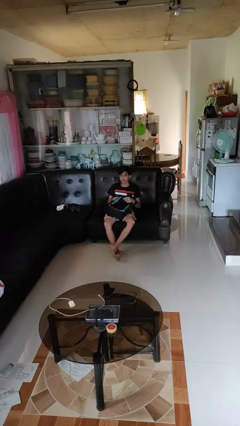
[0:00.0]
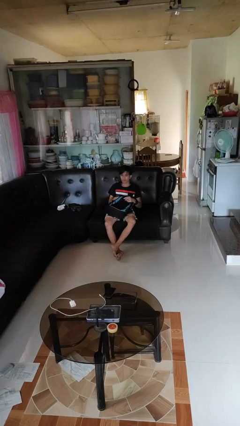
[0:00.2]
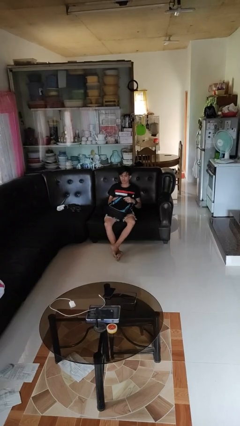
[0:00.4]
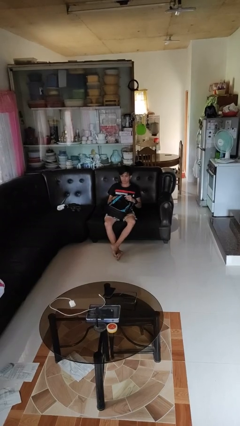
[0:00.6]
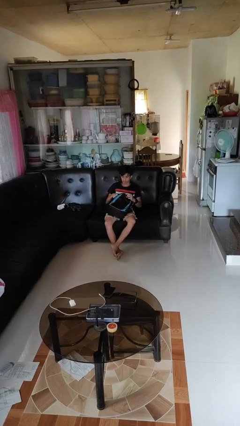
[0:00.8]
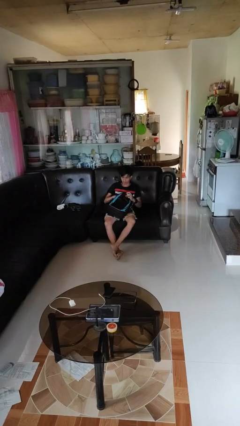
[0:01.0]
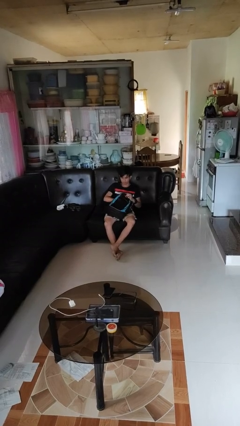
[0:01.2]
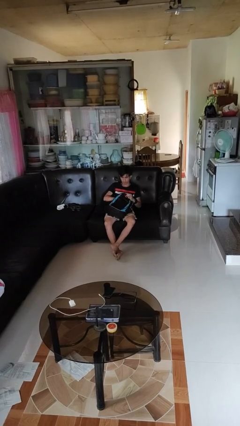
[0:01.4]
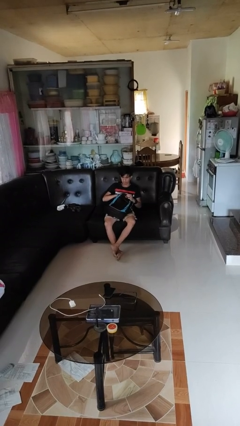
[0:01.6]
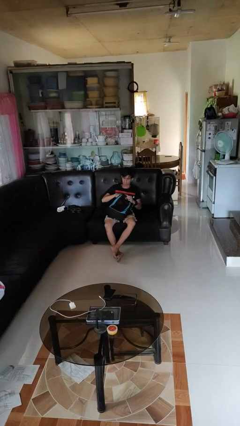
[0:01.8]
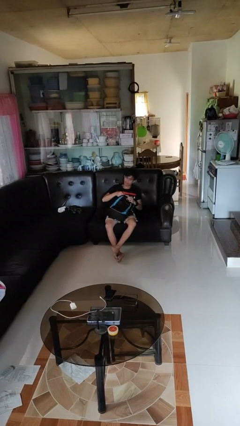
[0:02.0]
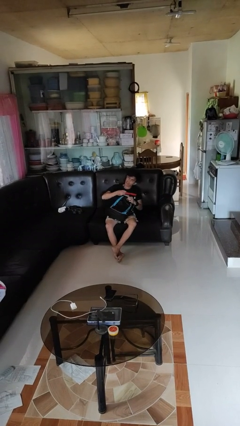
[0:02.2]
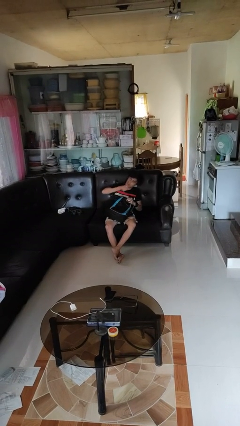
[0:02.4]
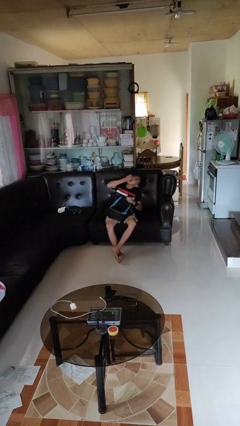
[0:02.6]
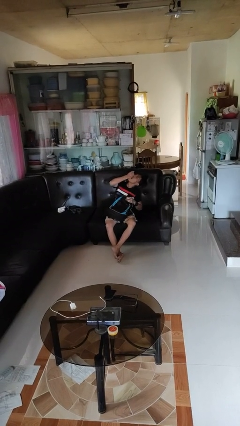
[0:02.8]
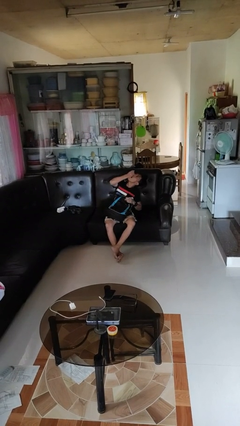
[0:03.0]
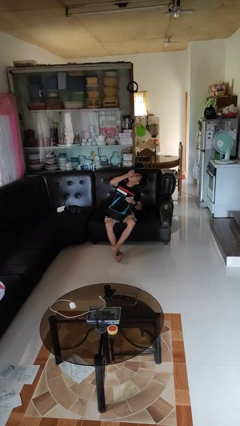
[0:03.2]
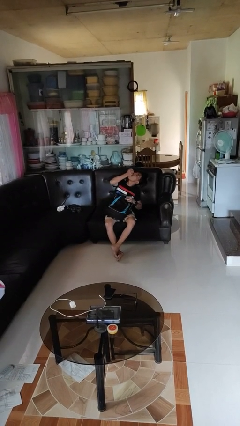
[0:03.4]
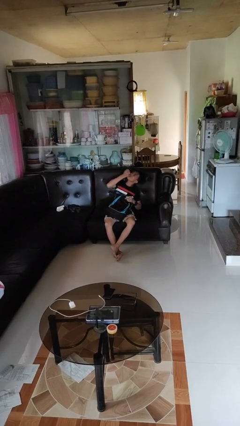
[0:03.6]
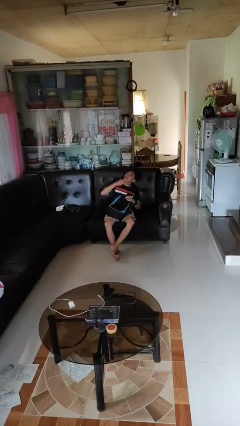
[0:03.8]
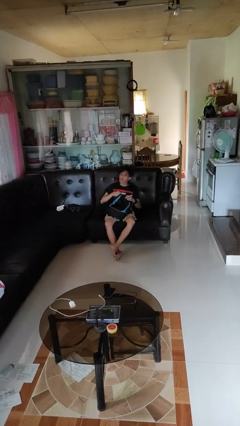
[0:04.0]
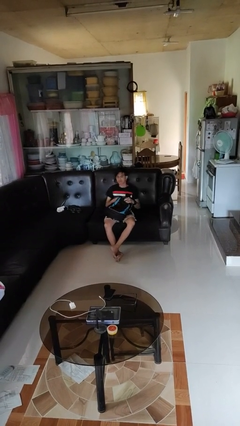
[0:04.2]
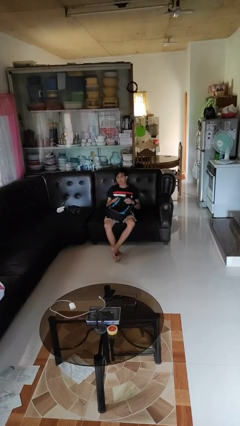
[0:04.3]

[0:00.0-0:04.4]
person eats snack from bag

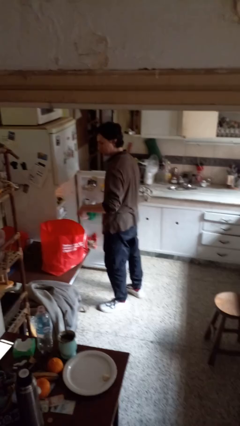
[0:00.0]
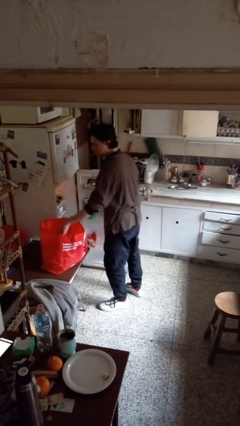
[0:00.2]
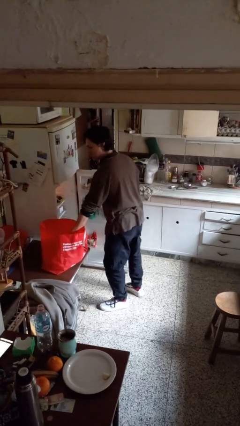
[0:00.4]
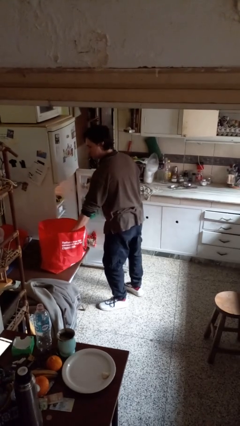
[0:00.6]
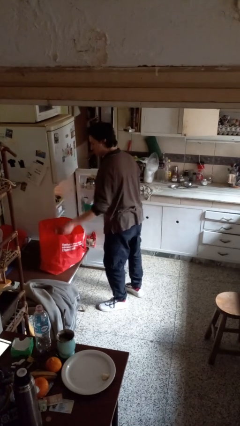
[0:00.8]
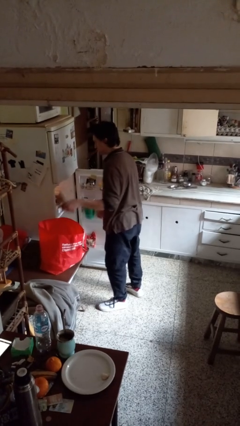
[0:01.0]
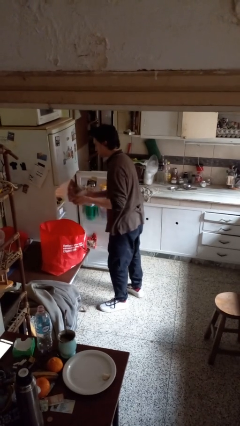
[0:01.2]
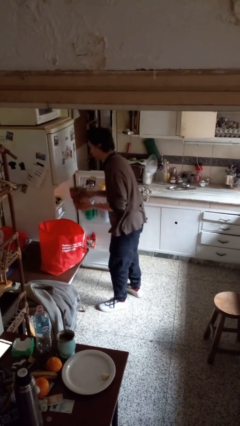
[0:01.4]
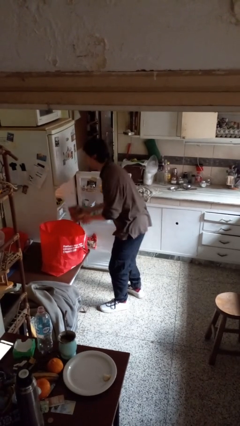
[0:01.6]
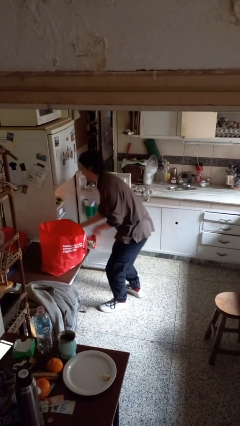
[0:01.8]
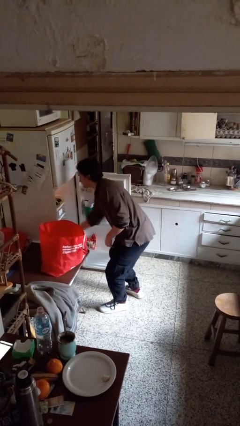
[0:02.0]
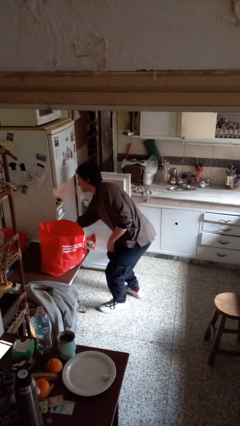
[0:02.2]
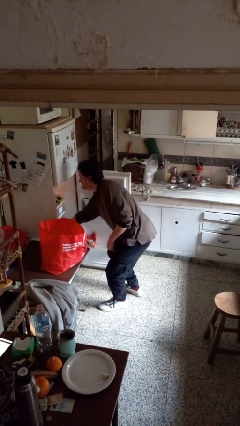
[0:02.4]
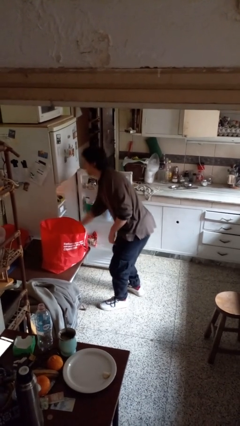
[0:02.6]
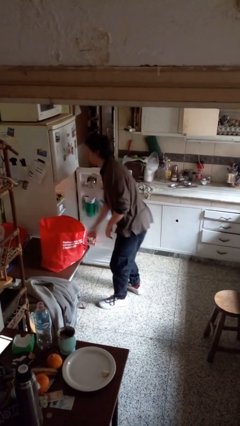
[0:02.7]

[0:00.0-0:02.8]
person loads groceries into refrigerator

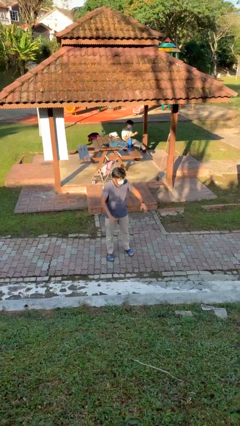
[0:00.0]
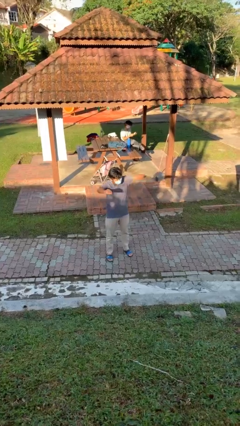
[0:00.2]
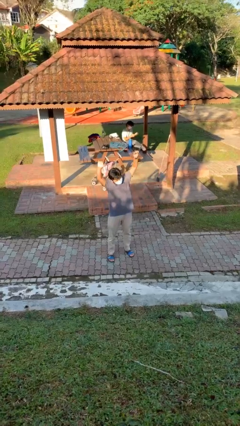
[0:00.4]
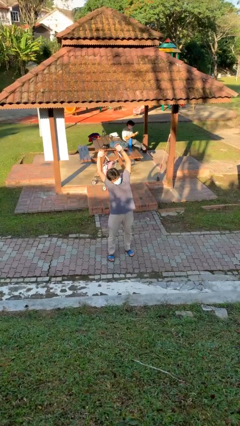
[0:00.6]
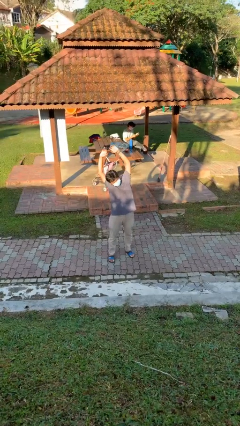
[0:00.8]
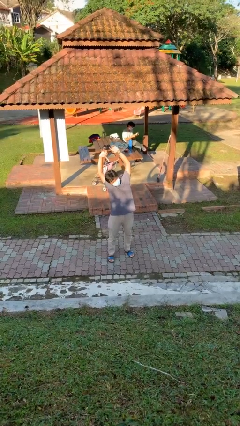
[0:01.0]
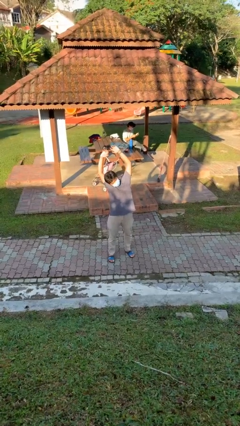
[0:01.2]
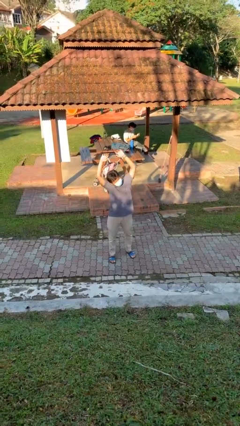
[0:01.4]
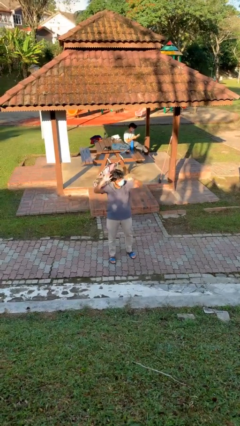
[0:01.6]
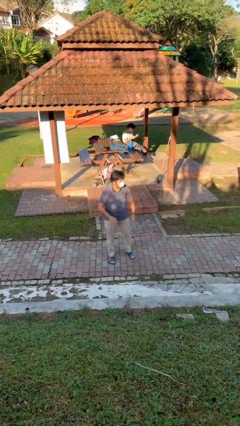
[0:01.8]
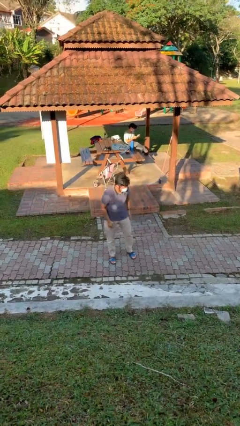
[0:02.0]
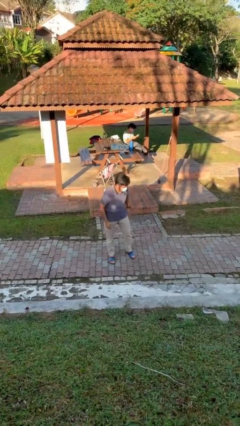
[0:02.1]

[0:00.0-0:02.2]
person stretches arms over head

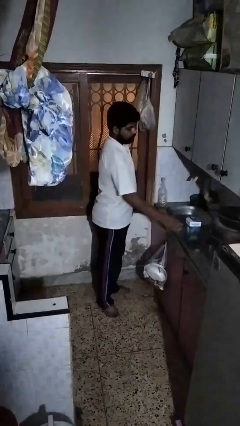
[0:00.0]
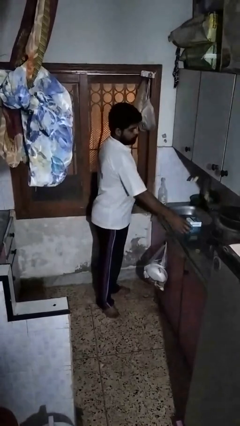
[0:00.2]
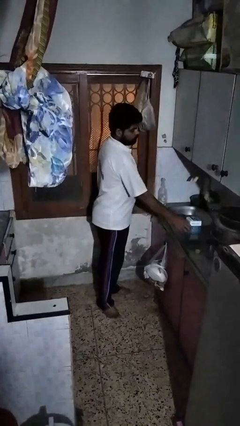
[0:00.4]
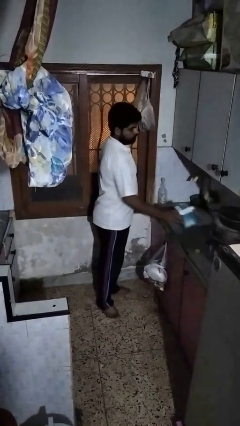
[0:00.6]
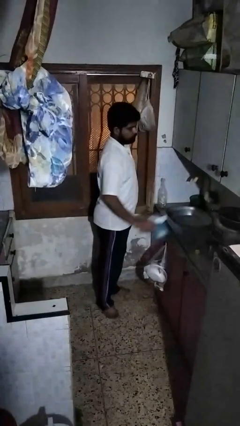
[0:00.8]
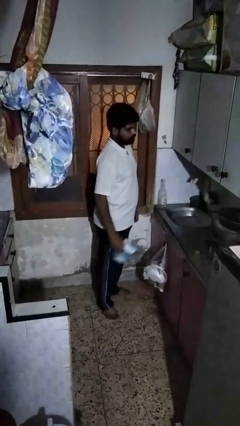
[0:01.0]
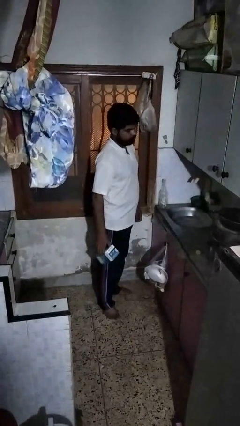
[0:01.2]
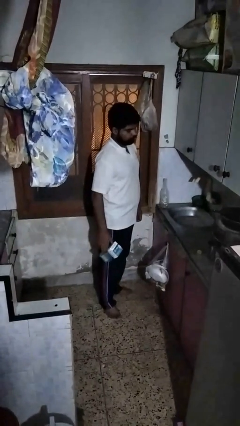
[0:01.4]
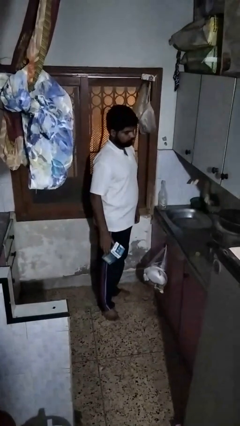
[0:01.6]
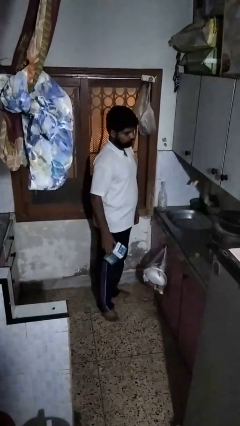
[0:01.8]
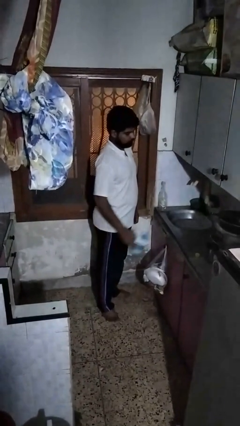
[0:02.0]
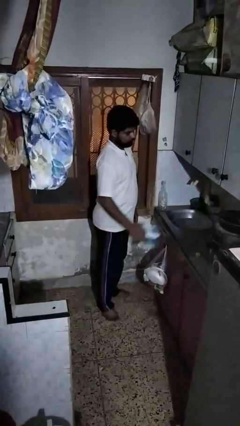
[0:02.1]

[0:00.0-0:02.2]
person picks up object from countertop

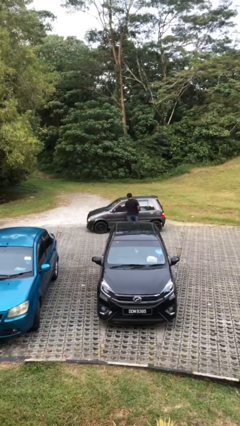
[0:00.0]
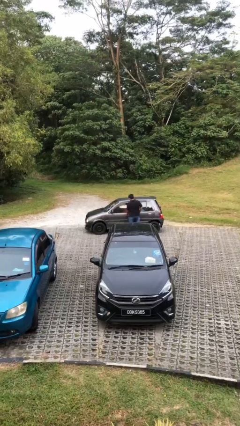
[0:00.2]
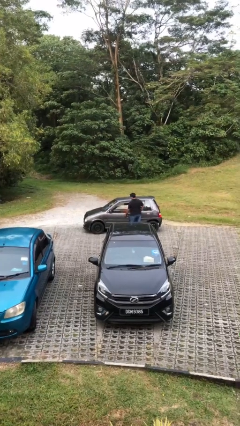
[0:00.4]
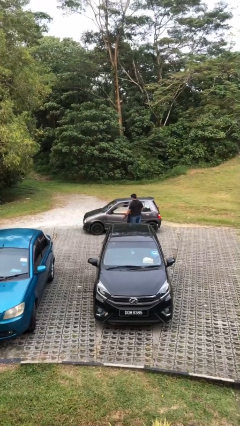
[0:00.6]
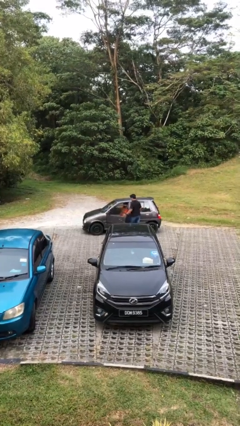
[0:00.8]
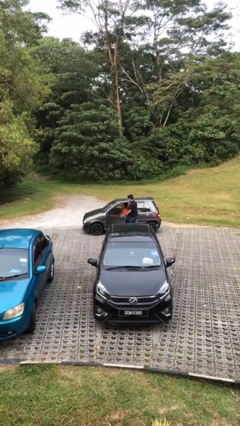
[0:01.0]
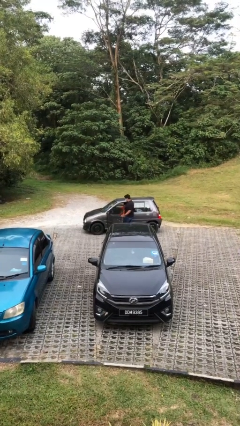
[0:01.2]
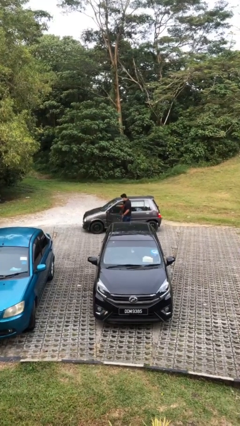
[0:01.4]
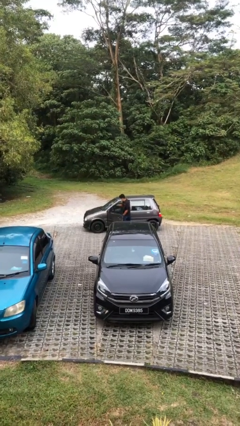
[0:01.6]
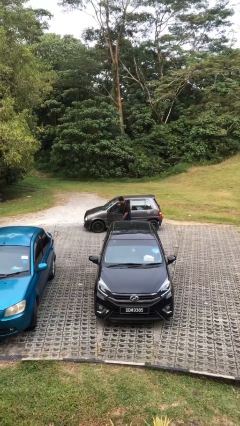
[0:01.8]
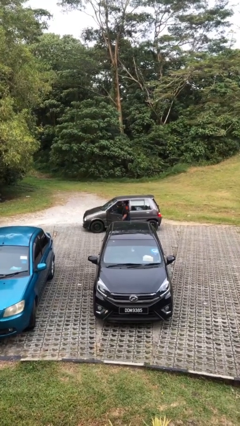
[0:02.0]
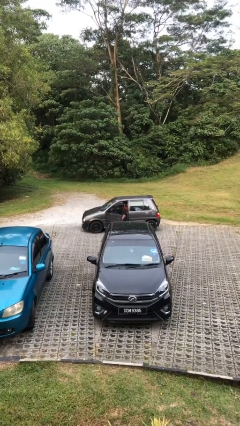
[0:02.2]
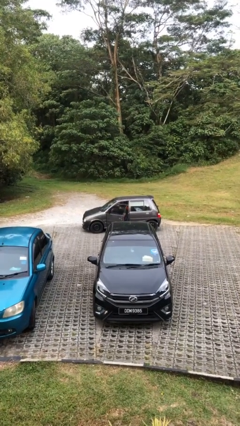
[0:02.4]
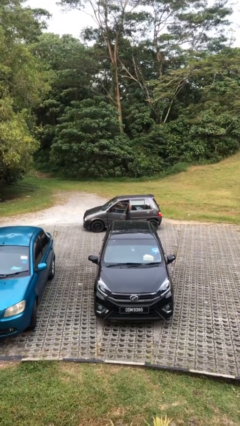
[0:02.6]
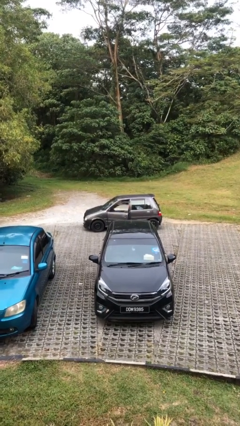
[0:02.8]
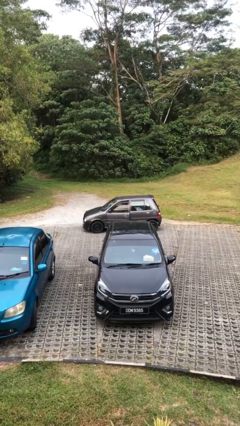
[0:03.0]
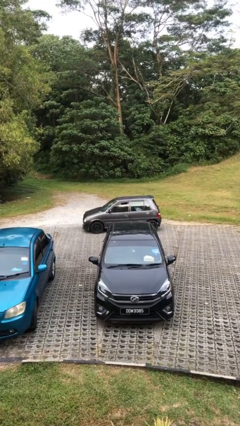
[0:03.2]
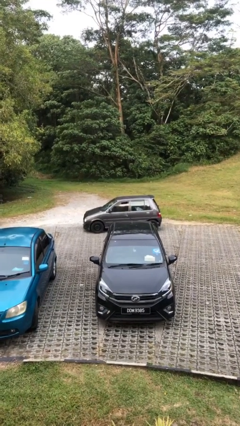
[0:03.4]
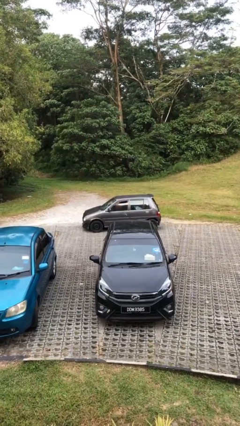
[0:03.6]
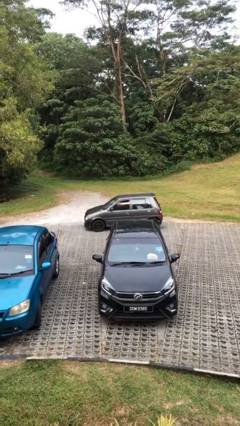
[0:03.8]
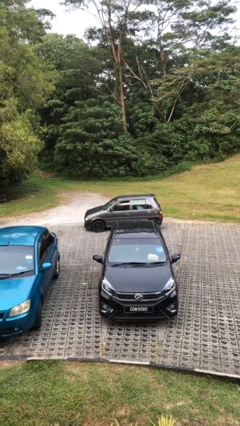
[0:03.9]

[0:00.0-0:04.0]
car picks up person

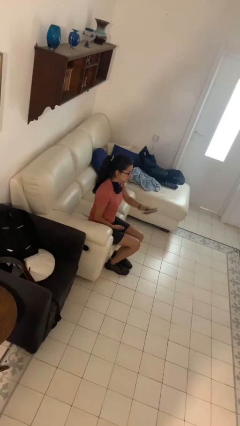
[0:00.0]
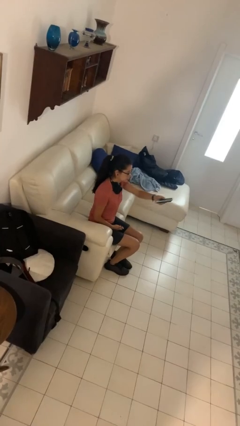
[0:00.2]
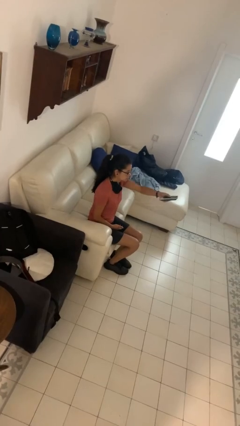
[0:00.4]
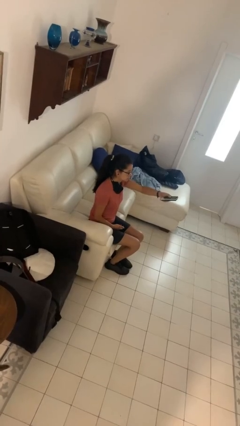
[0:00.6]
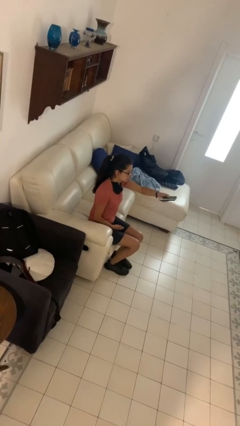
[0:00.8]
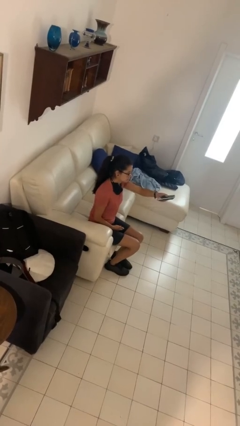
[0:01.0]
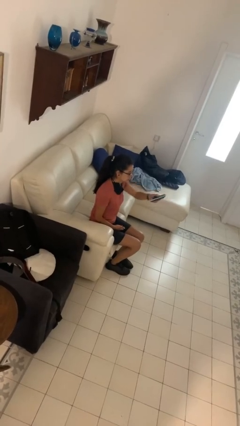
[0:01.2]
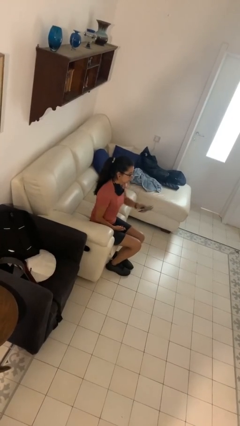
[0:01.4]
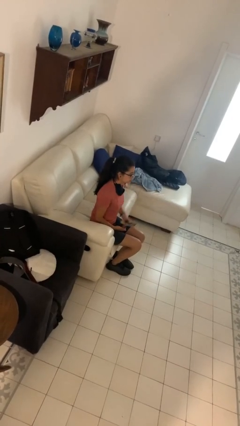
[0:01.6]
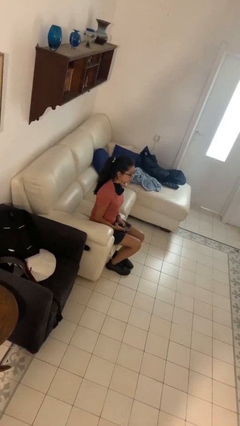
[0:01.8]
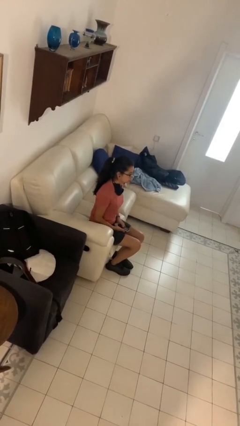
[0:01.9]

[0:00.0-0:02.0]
person uses television remote
